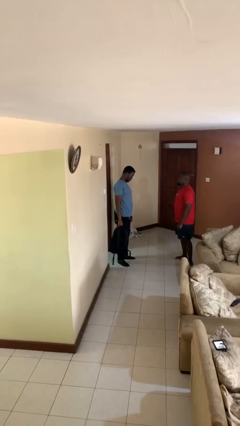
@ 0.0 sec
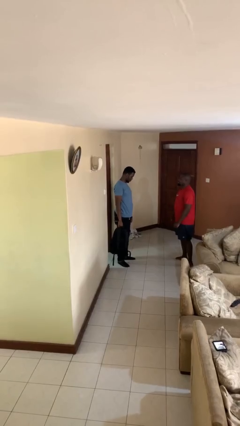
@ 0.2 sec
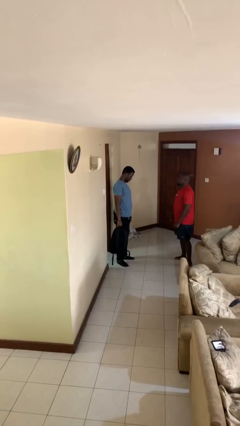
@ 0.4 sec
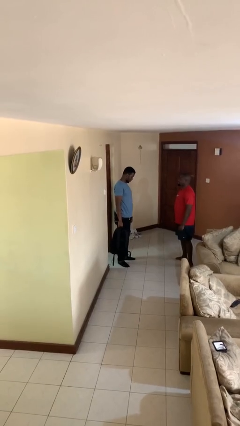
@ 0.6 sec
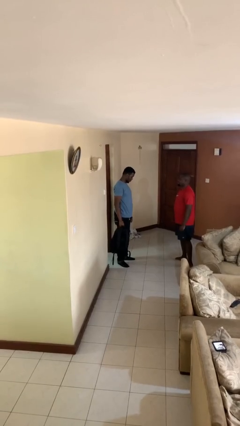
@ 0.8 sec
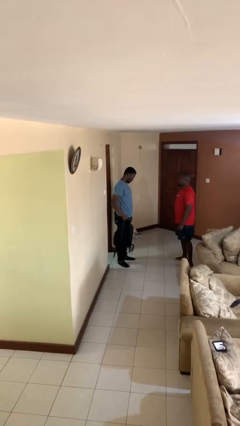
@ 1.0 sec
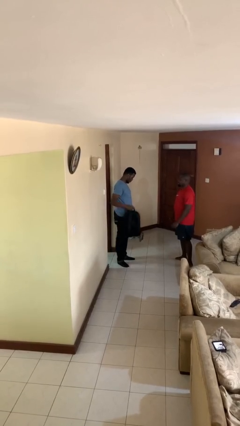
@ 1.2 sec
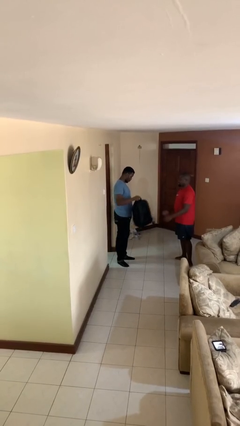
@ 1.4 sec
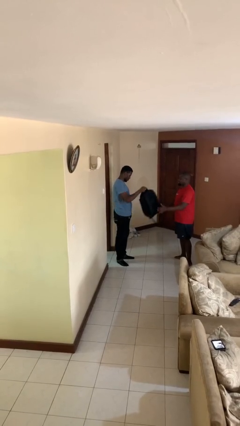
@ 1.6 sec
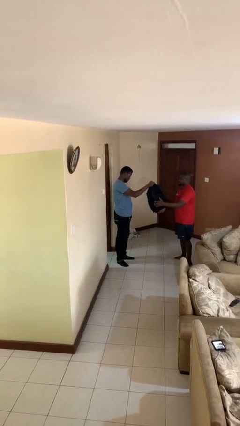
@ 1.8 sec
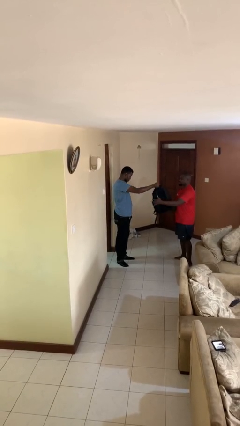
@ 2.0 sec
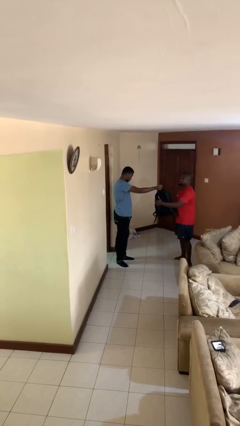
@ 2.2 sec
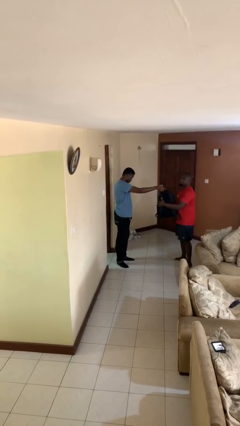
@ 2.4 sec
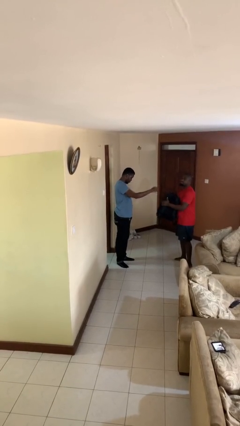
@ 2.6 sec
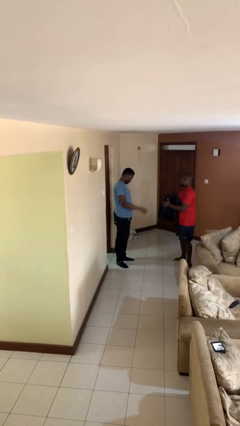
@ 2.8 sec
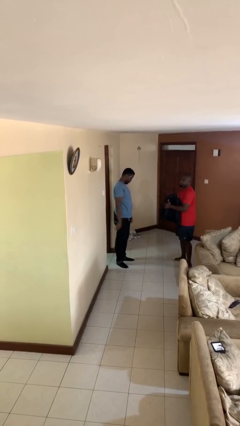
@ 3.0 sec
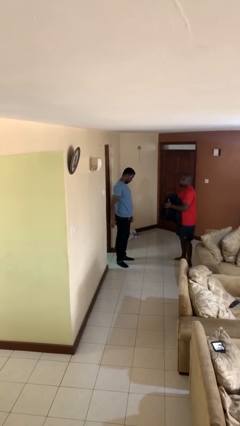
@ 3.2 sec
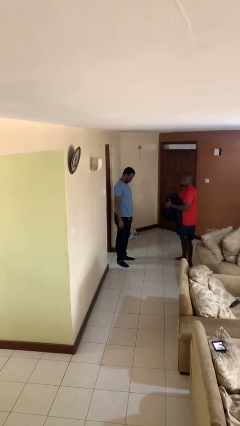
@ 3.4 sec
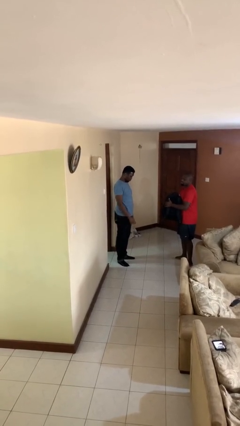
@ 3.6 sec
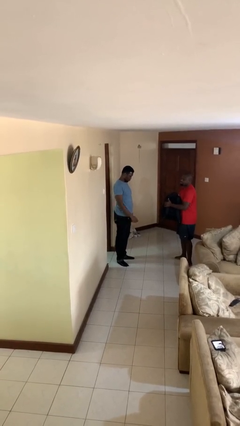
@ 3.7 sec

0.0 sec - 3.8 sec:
person transfers object to person

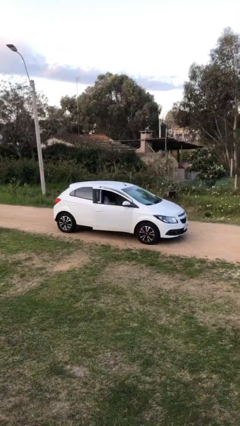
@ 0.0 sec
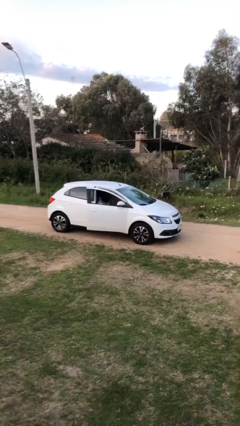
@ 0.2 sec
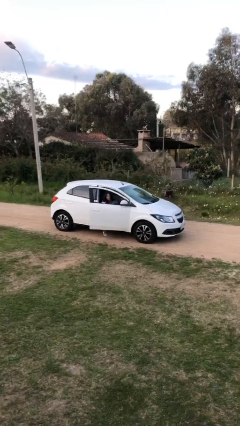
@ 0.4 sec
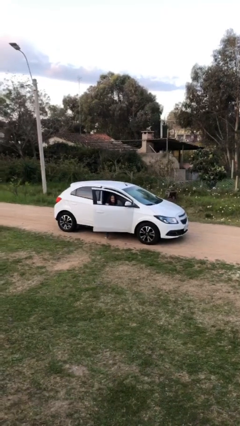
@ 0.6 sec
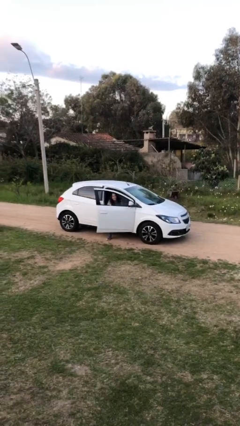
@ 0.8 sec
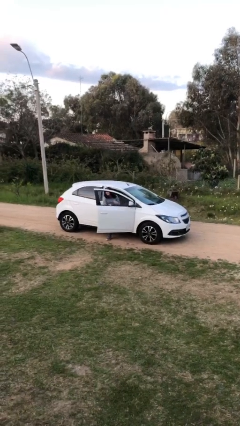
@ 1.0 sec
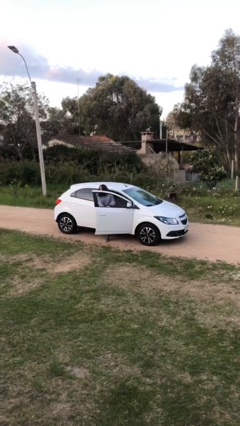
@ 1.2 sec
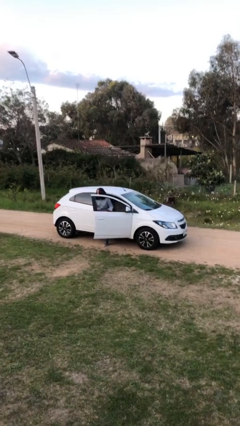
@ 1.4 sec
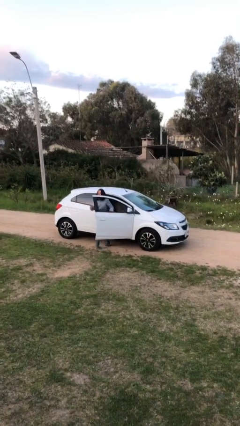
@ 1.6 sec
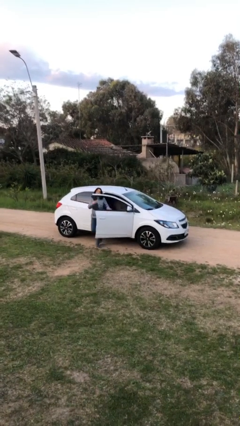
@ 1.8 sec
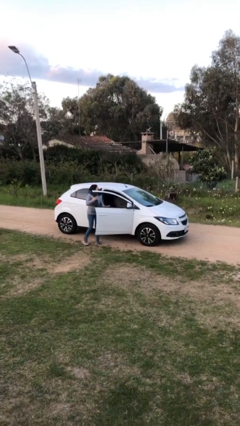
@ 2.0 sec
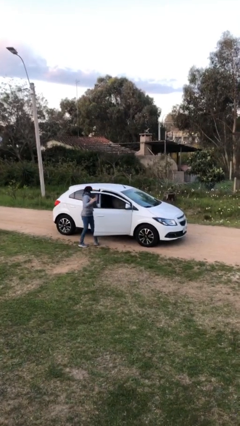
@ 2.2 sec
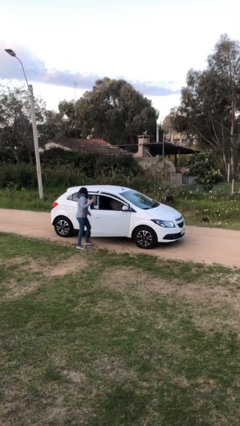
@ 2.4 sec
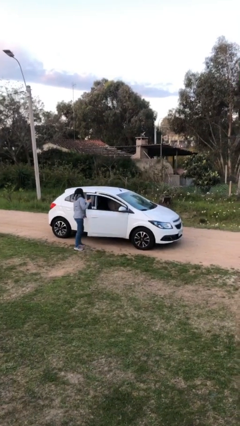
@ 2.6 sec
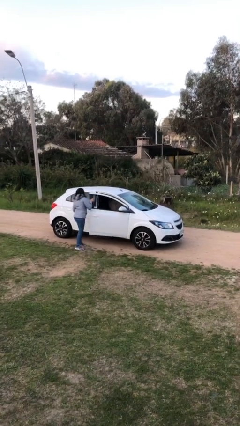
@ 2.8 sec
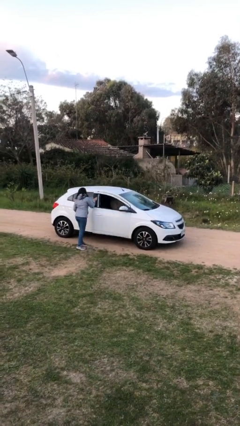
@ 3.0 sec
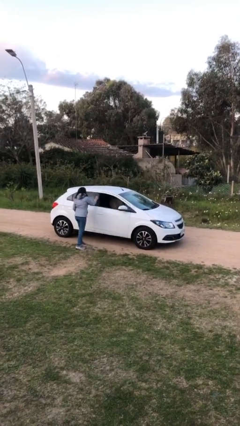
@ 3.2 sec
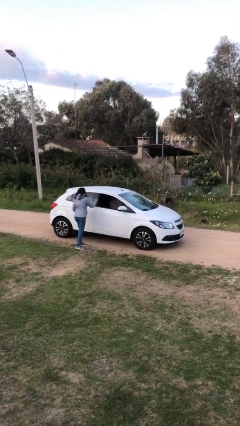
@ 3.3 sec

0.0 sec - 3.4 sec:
car drops off person

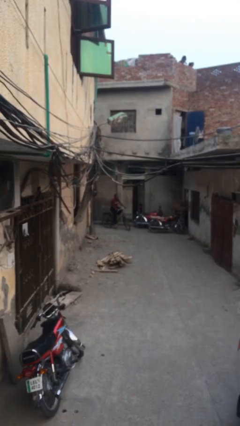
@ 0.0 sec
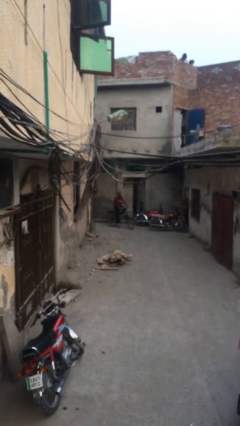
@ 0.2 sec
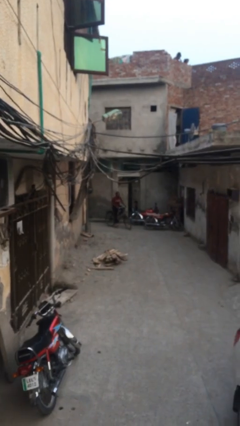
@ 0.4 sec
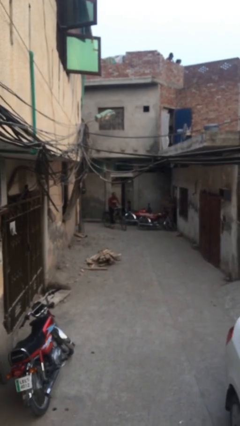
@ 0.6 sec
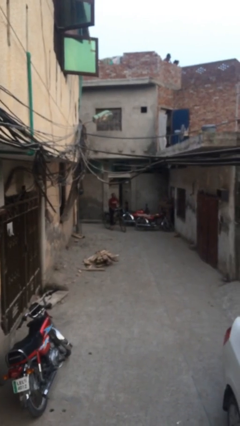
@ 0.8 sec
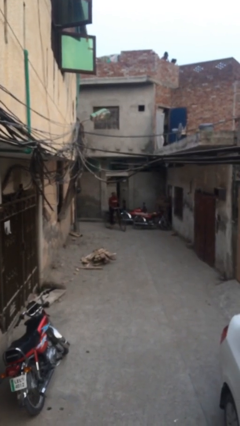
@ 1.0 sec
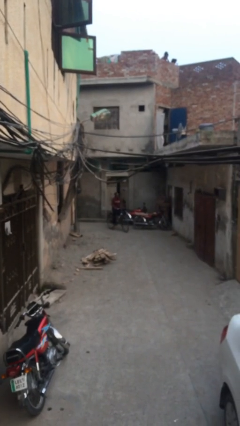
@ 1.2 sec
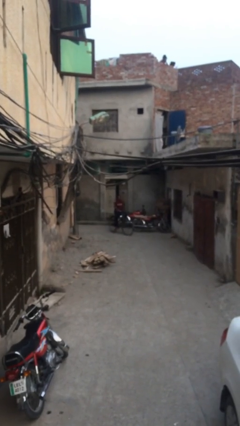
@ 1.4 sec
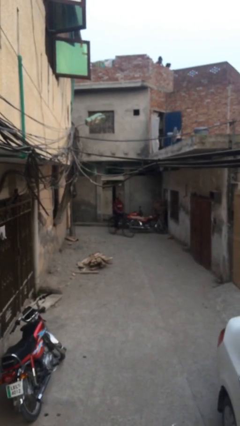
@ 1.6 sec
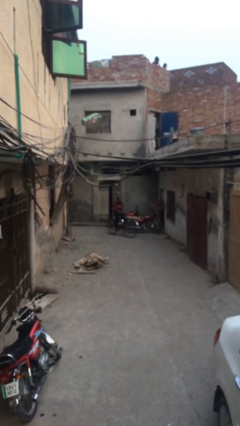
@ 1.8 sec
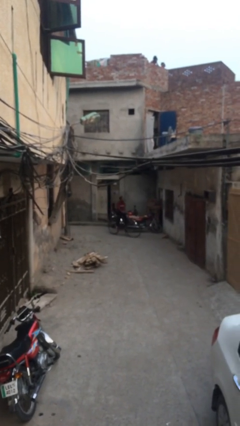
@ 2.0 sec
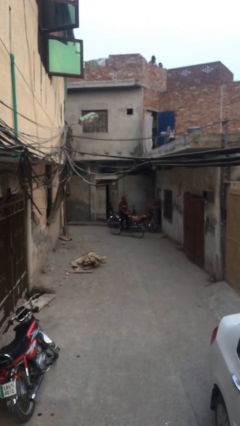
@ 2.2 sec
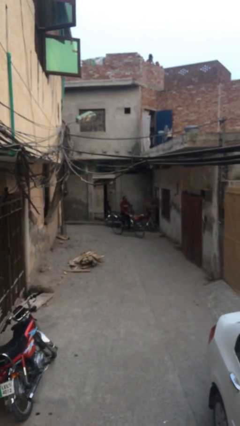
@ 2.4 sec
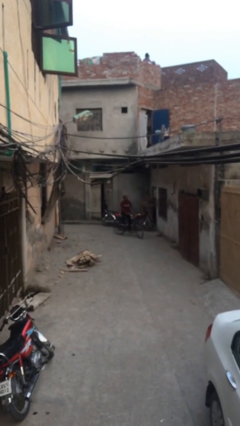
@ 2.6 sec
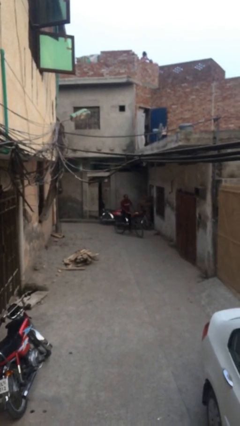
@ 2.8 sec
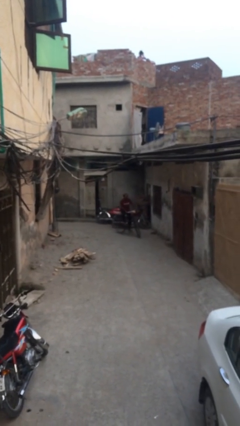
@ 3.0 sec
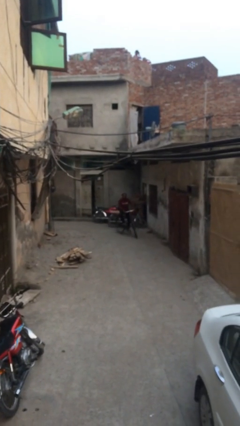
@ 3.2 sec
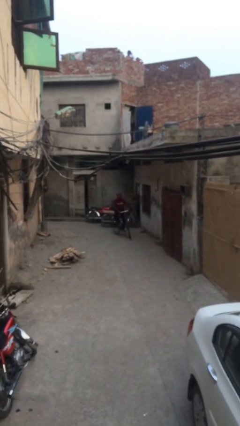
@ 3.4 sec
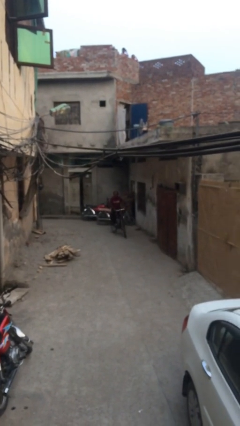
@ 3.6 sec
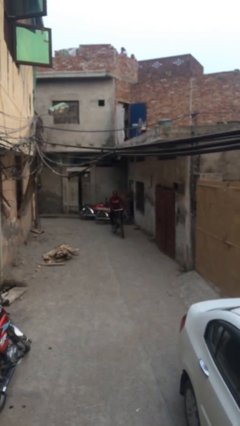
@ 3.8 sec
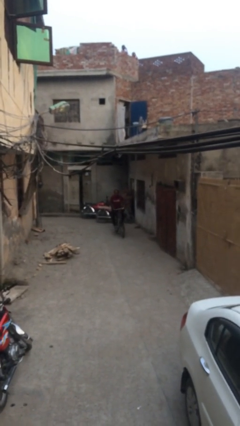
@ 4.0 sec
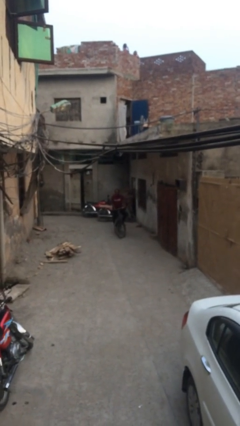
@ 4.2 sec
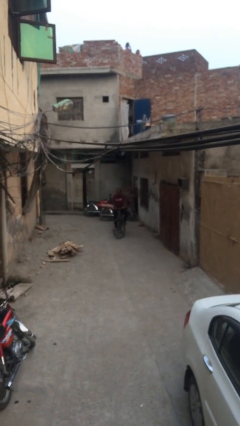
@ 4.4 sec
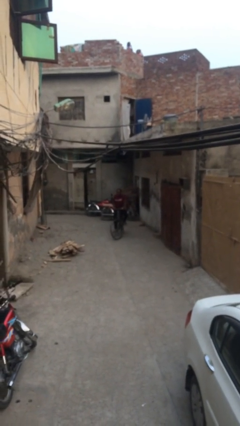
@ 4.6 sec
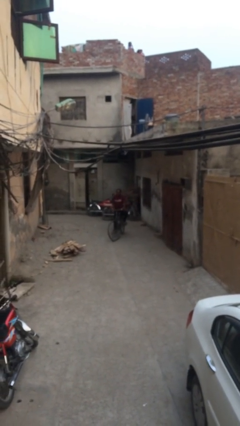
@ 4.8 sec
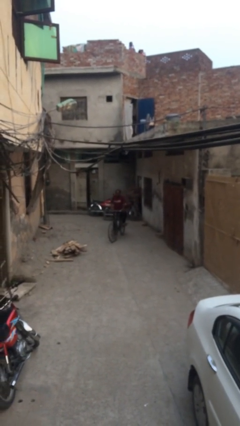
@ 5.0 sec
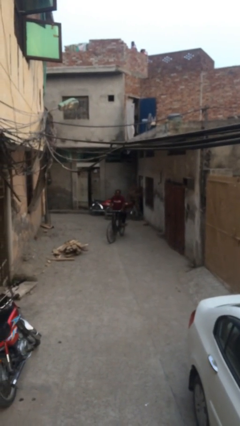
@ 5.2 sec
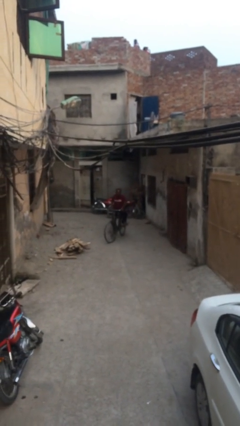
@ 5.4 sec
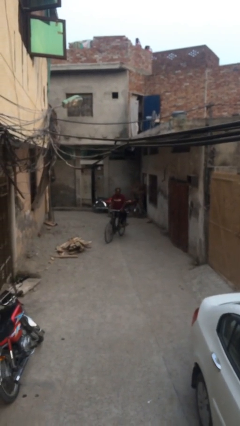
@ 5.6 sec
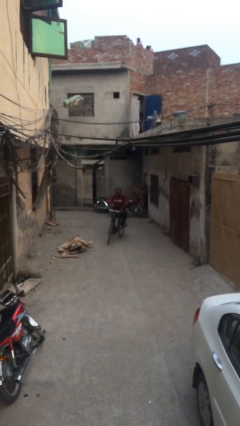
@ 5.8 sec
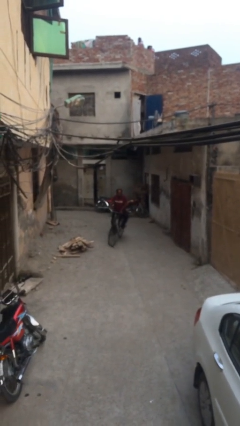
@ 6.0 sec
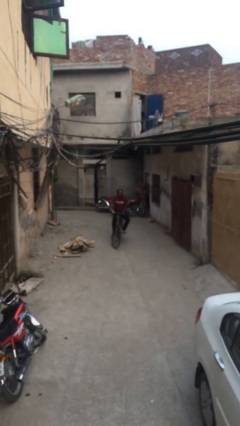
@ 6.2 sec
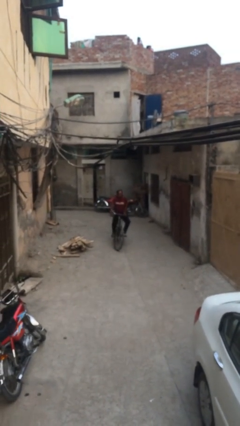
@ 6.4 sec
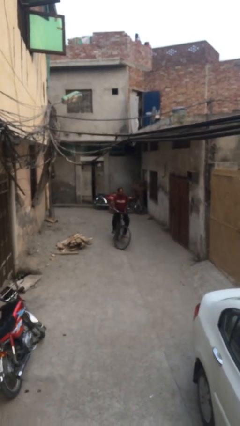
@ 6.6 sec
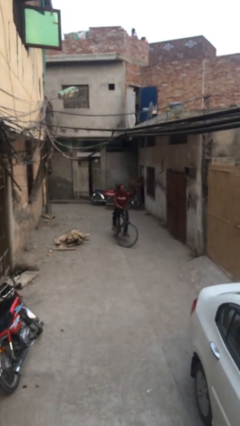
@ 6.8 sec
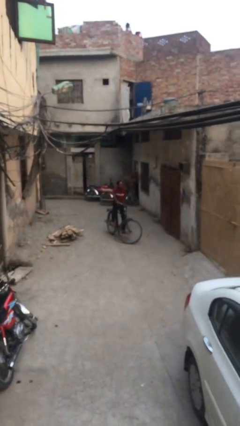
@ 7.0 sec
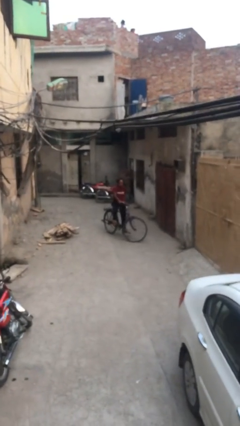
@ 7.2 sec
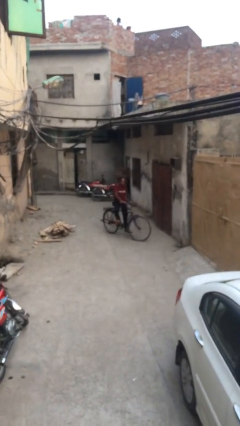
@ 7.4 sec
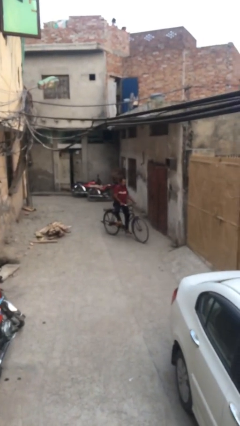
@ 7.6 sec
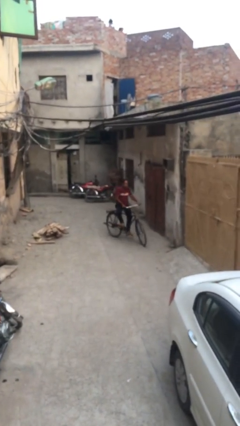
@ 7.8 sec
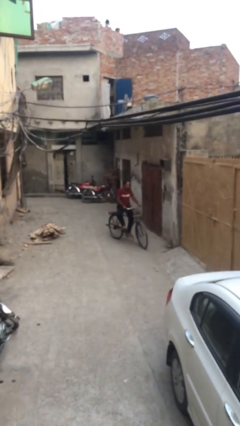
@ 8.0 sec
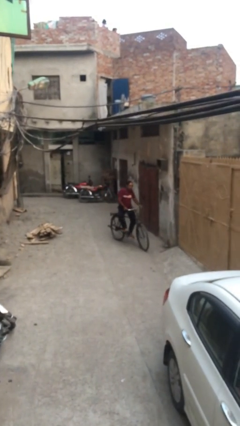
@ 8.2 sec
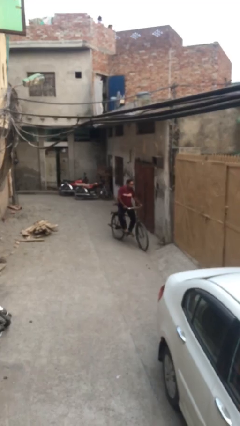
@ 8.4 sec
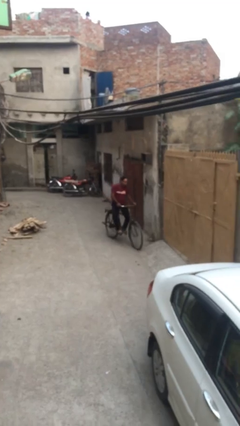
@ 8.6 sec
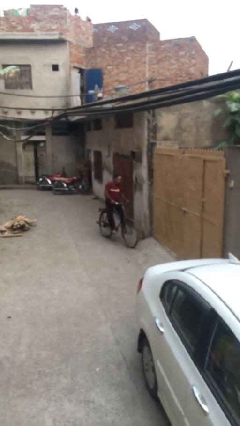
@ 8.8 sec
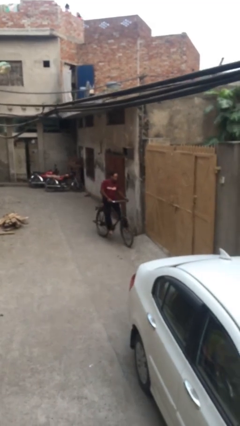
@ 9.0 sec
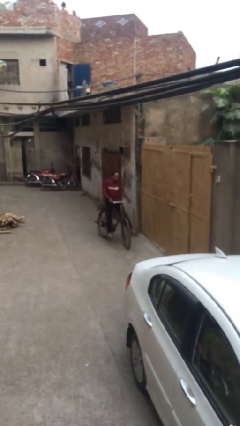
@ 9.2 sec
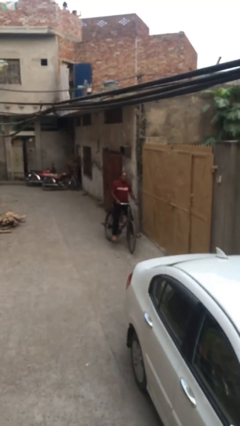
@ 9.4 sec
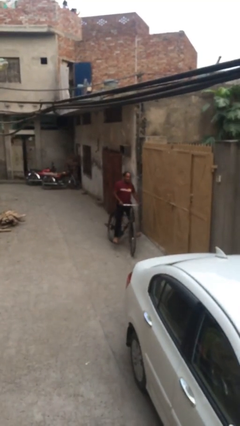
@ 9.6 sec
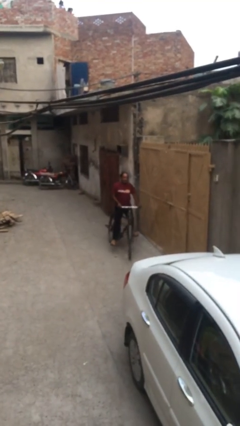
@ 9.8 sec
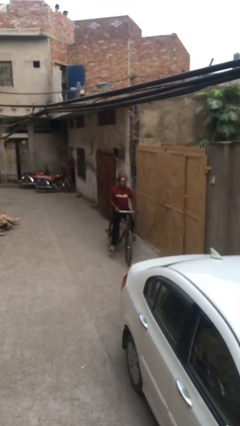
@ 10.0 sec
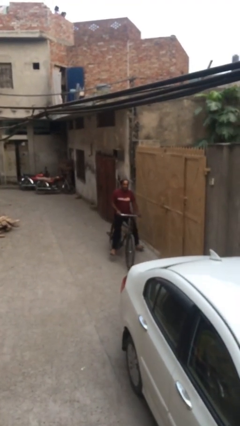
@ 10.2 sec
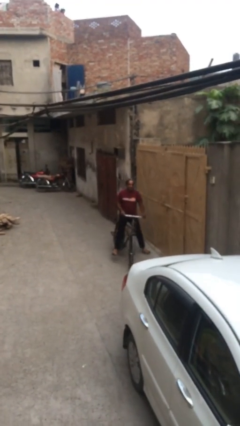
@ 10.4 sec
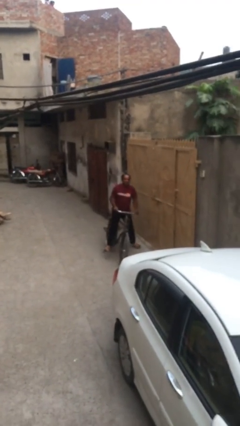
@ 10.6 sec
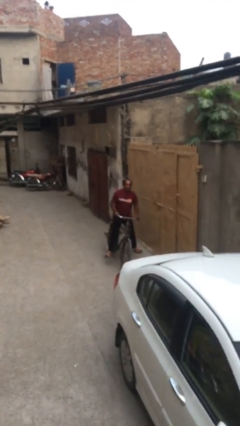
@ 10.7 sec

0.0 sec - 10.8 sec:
person rides bicycle
